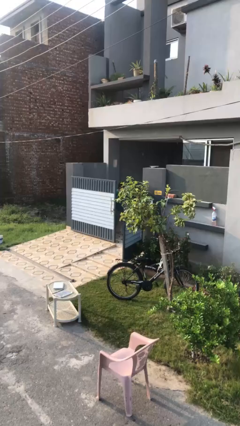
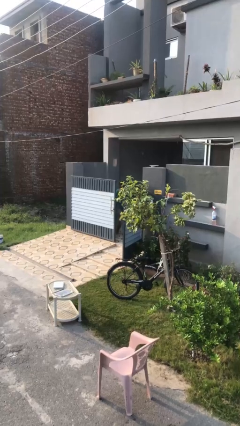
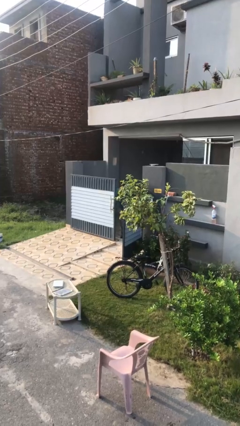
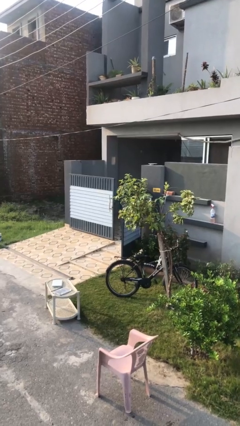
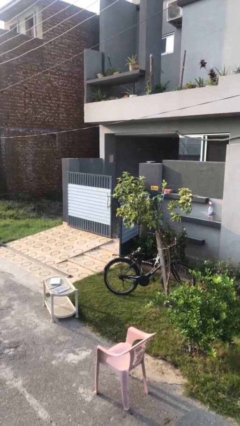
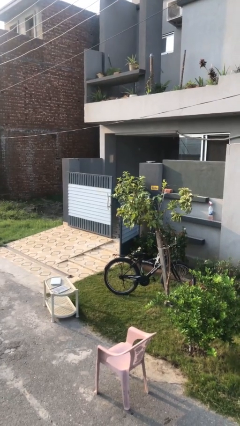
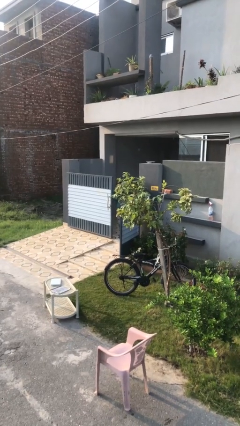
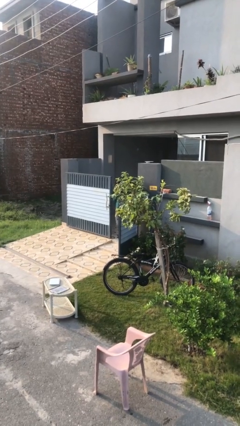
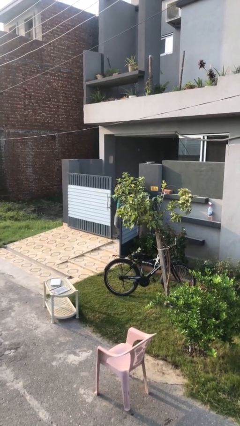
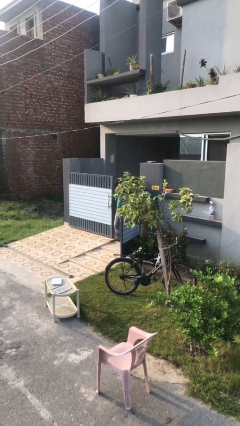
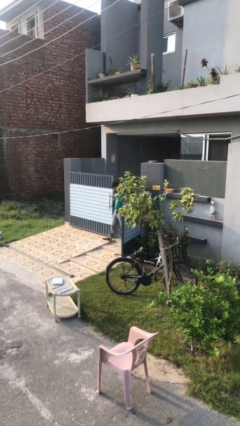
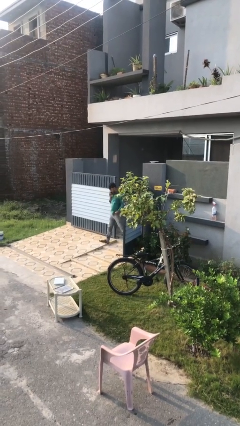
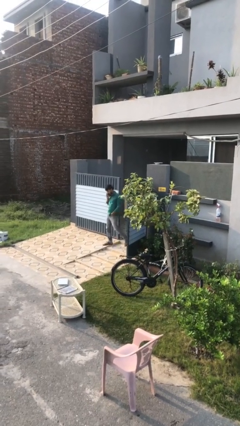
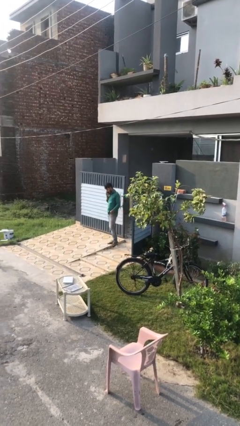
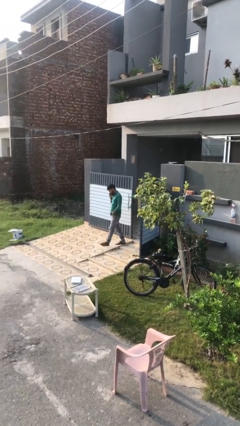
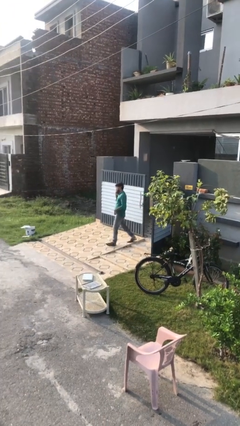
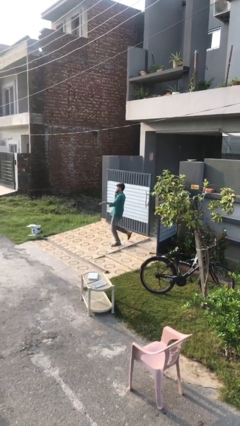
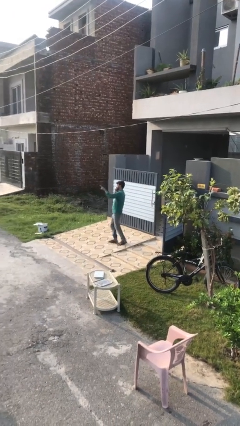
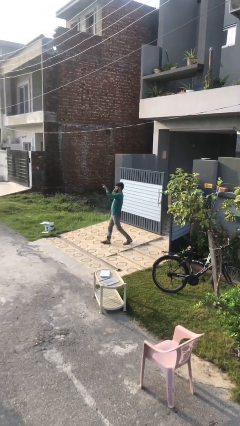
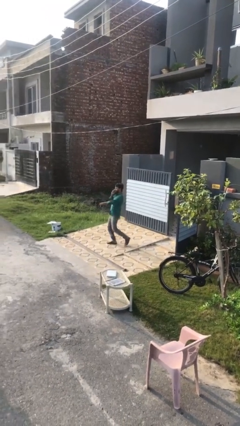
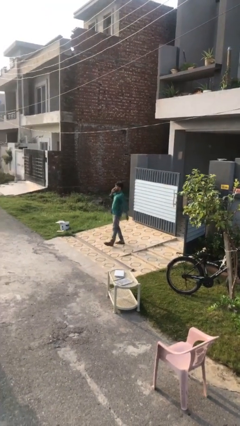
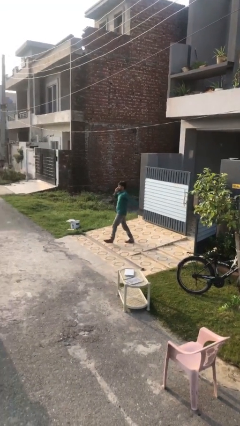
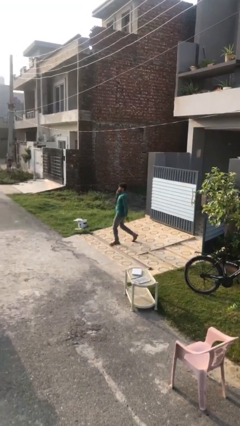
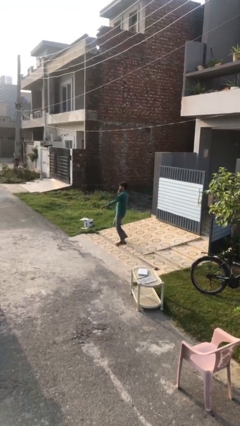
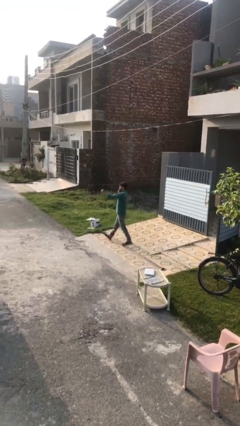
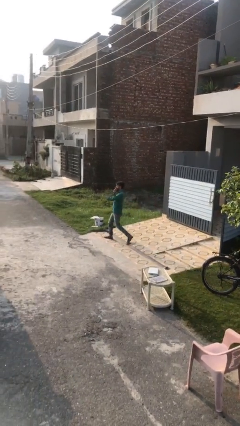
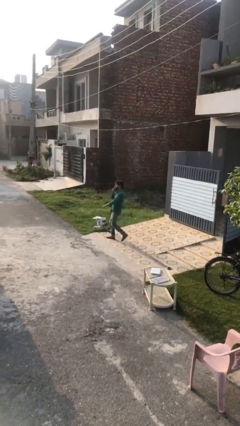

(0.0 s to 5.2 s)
person enters scene through structure

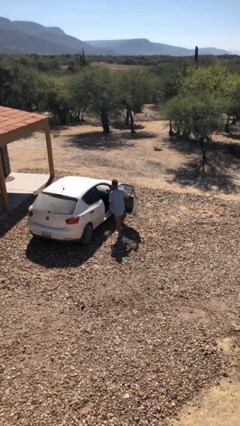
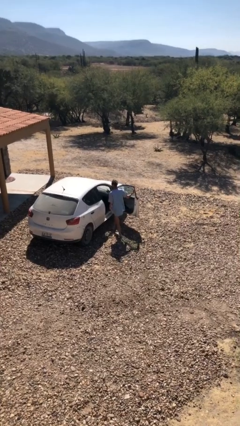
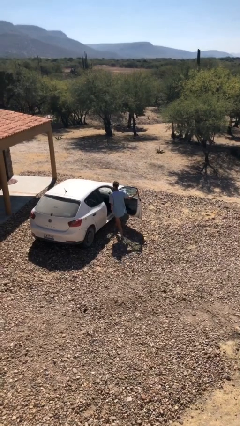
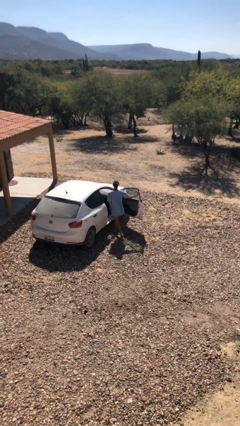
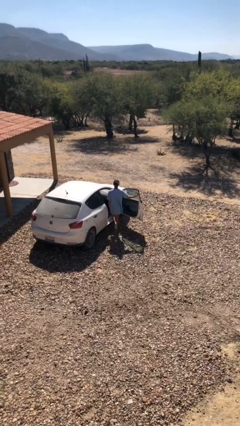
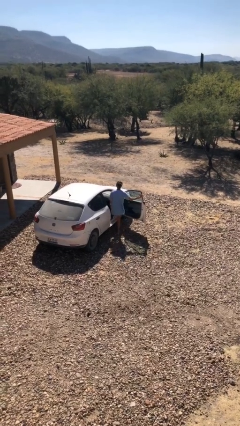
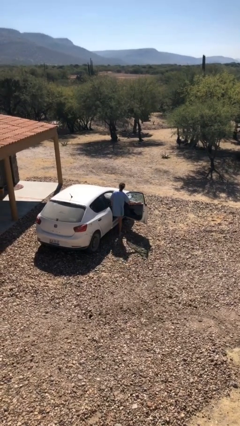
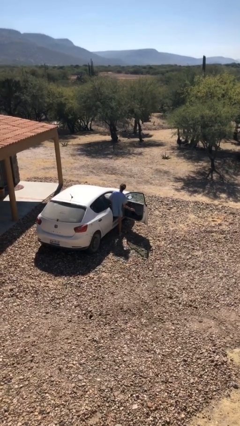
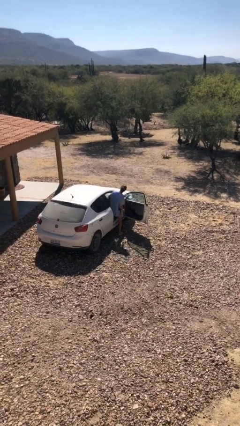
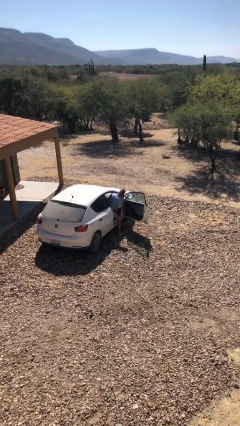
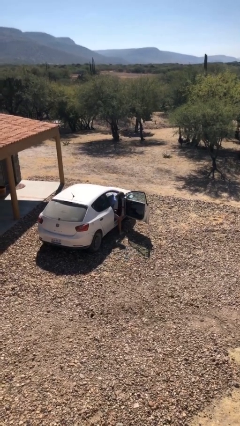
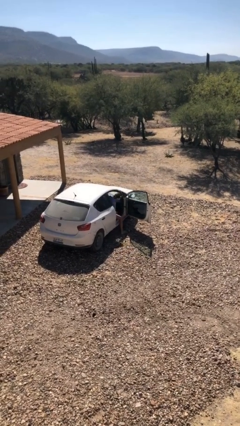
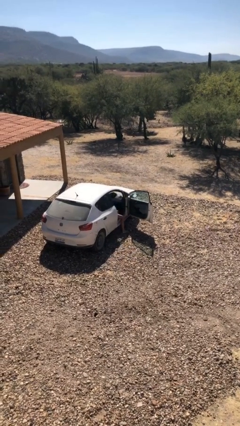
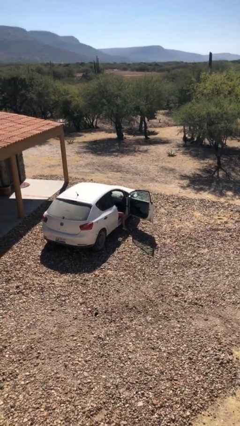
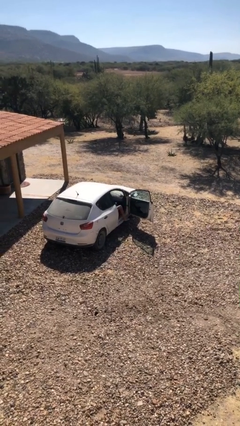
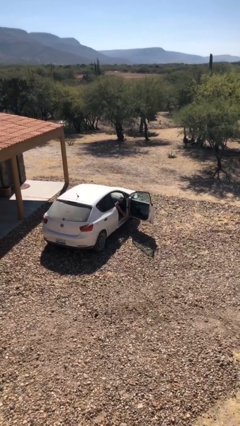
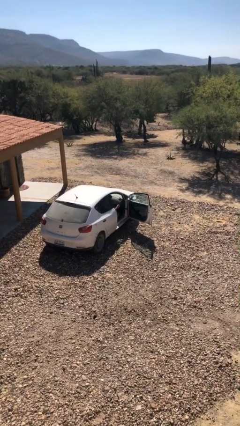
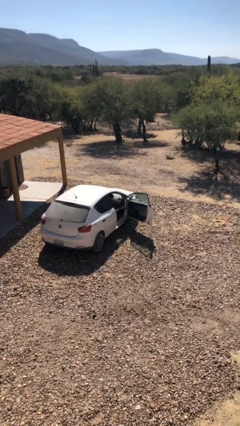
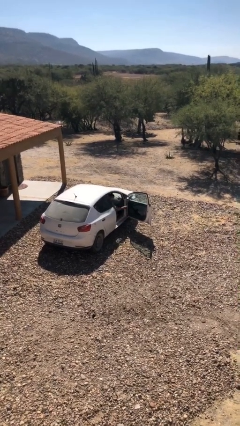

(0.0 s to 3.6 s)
person enters car

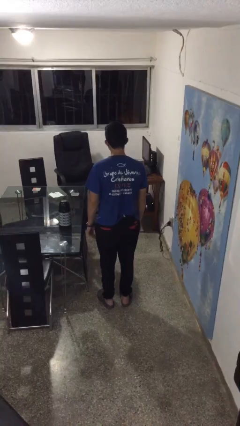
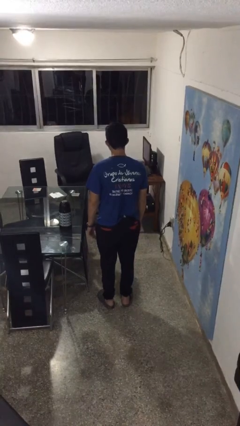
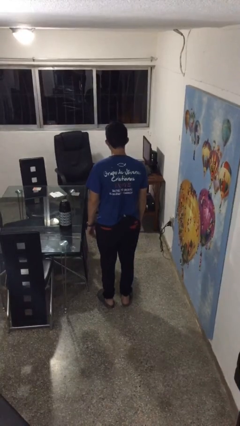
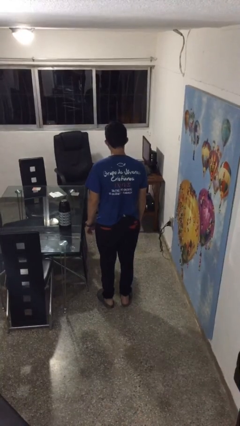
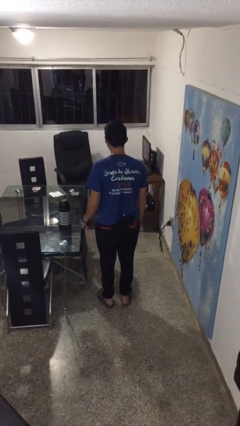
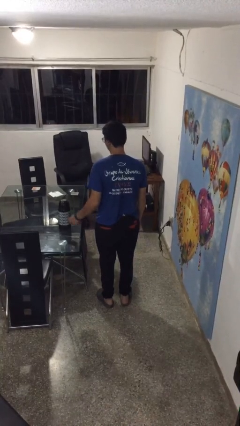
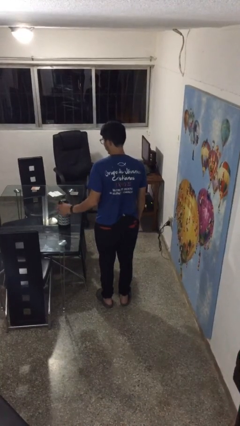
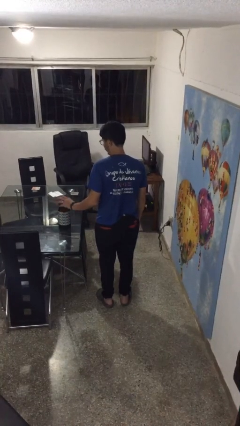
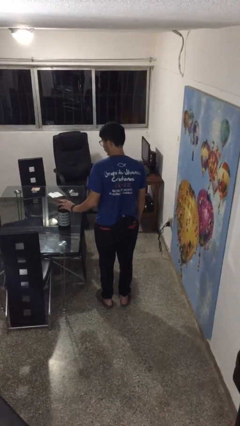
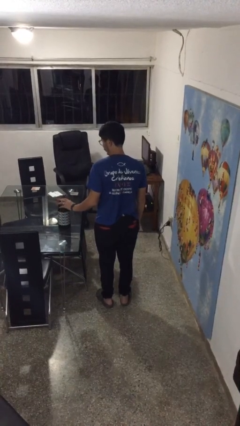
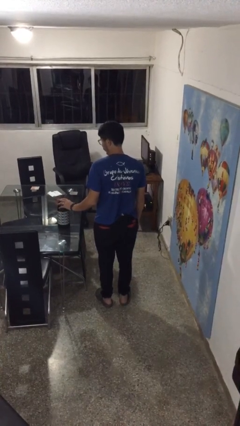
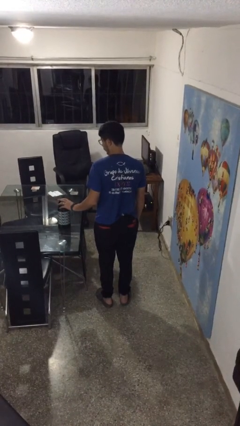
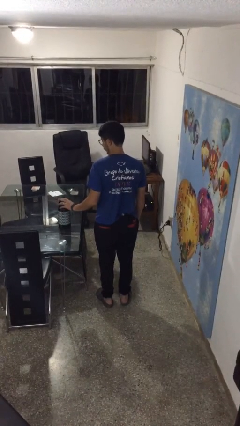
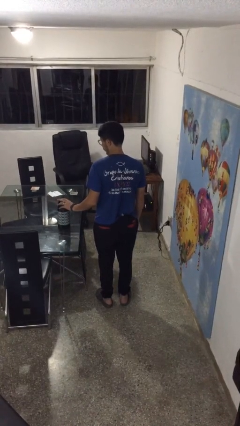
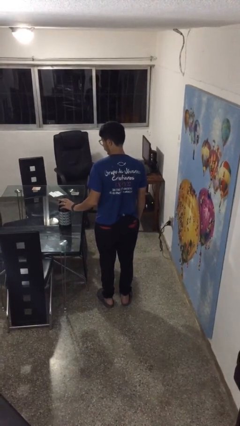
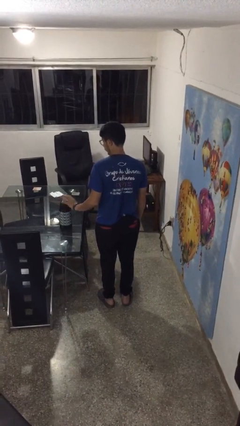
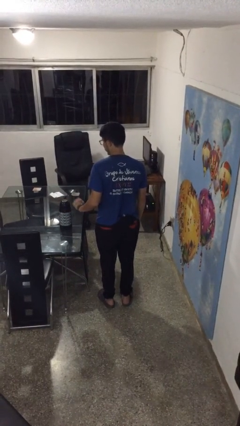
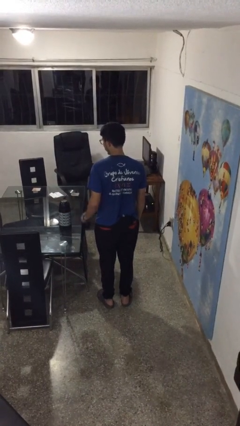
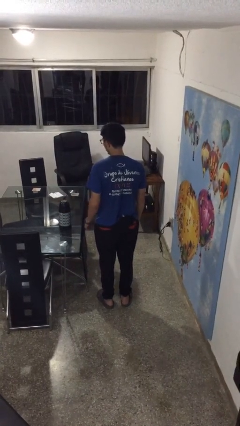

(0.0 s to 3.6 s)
person taps object with finger

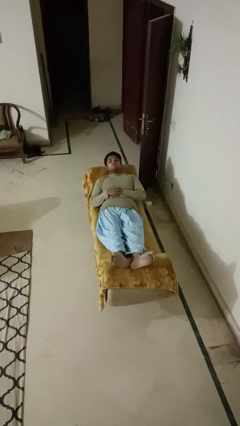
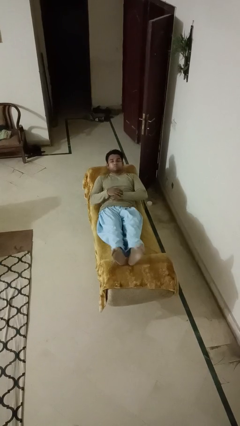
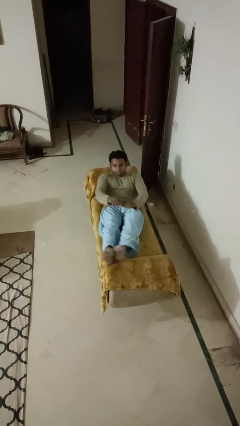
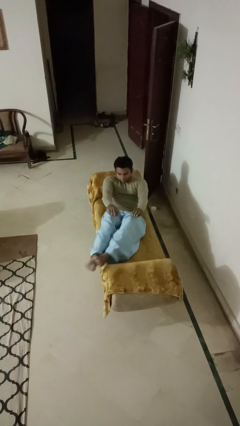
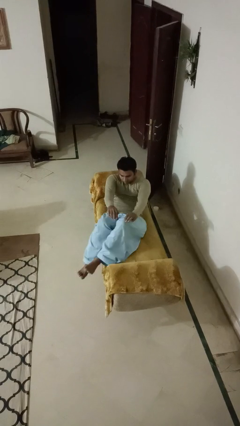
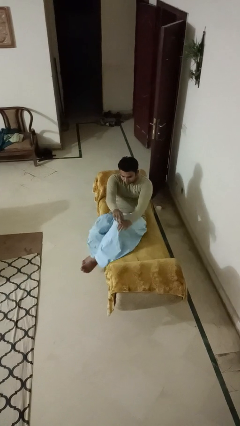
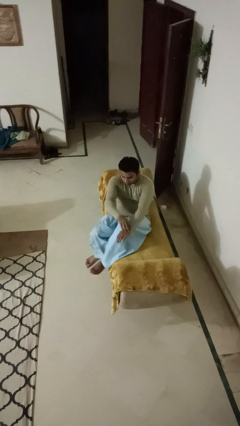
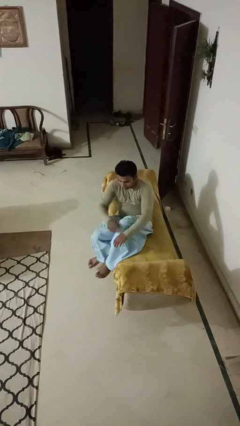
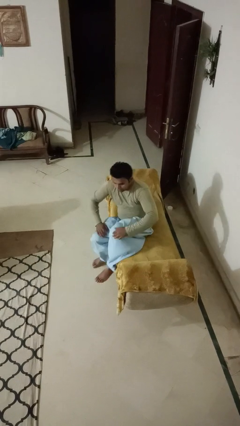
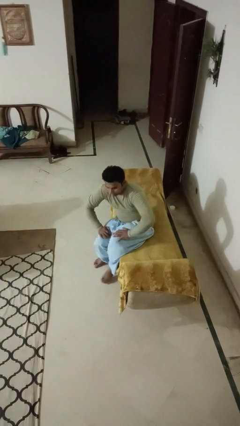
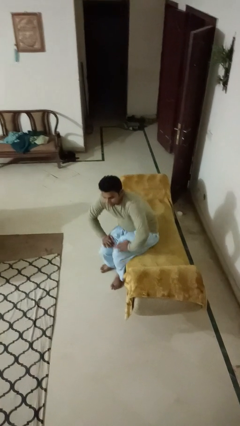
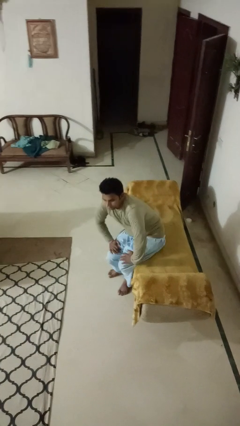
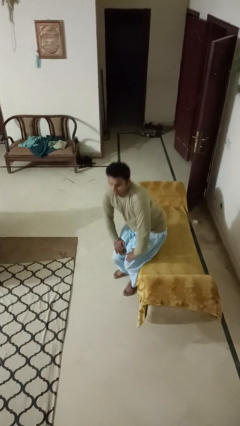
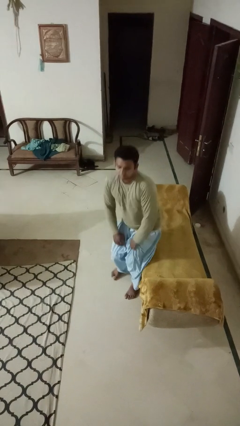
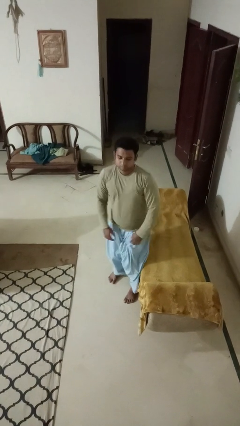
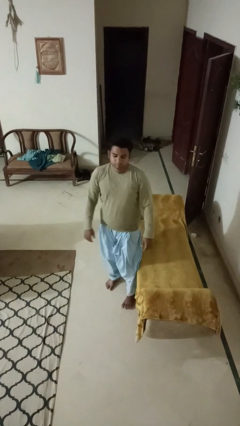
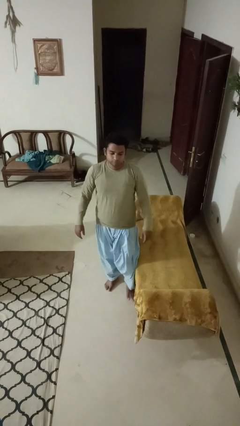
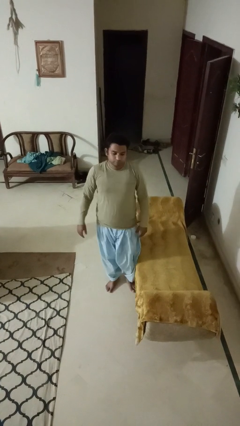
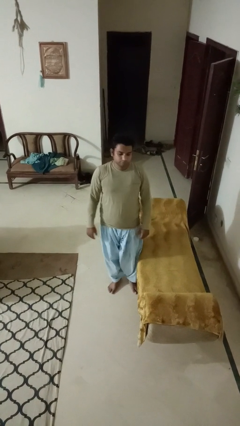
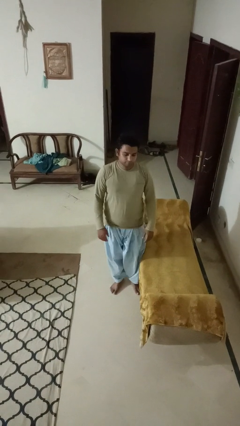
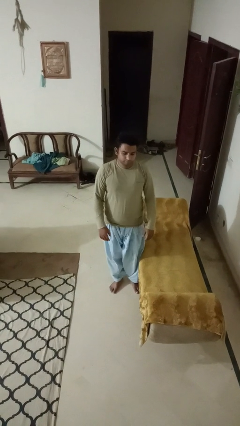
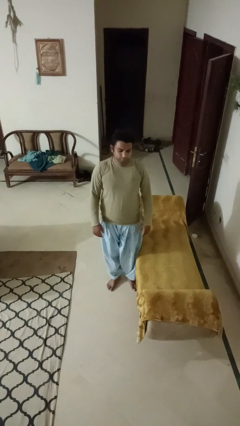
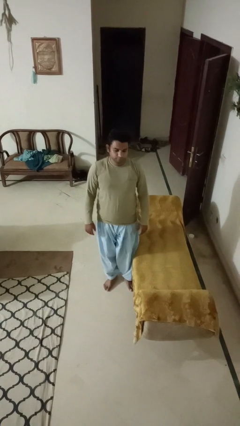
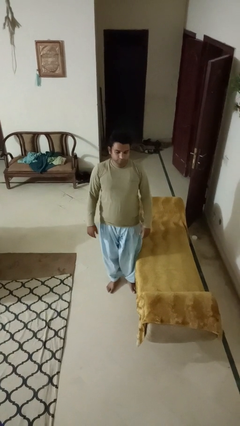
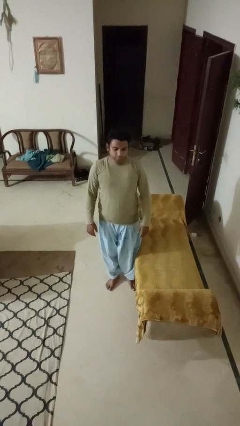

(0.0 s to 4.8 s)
person stands up

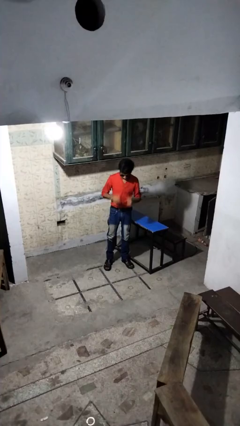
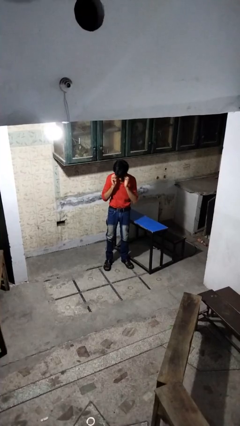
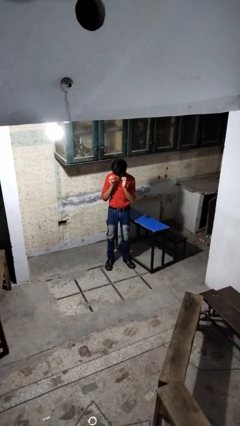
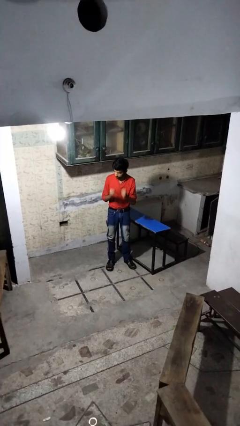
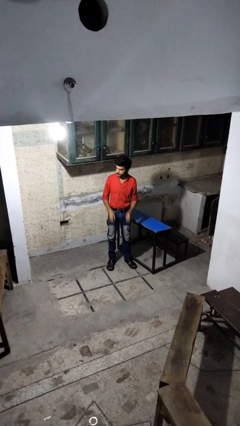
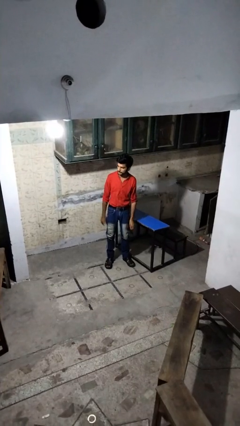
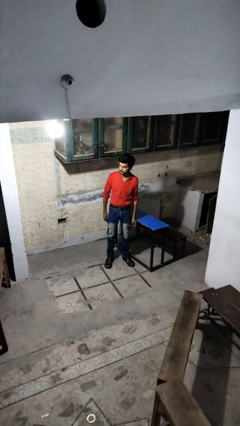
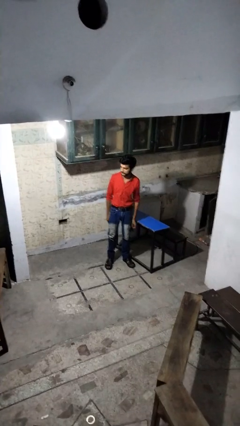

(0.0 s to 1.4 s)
person takes off sunglasses
